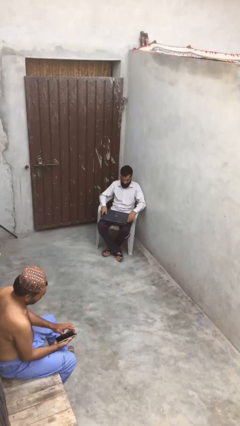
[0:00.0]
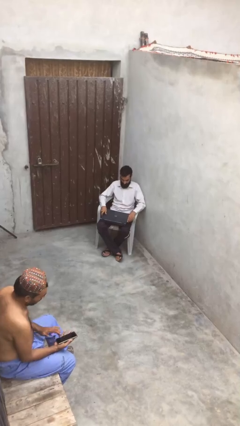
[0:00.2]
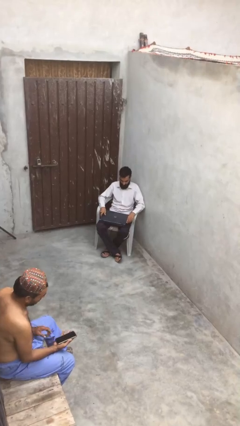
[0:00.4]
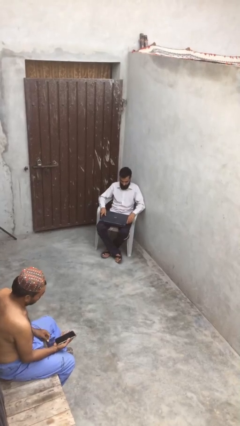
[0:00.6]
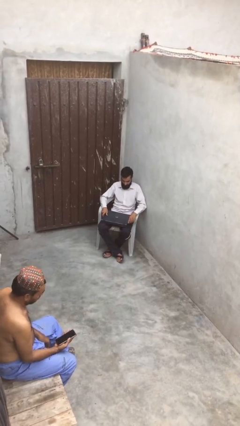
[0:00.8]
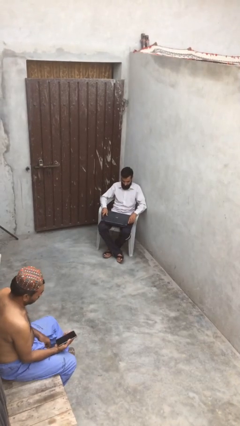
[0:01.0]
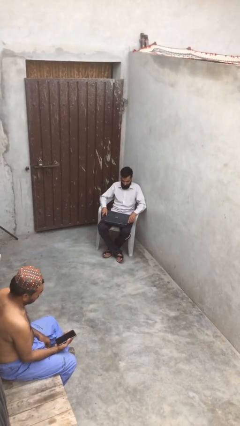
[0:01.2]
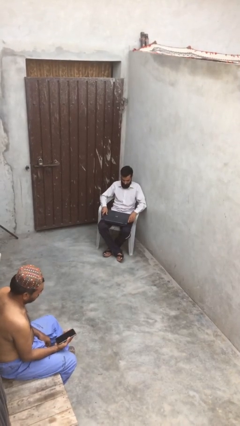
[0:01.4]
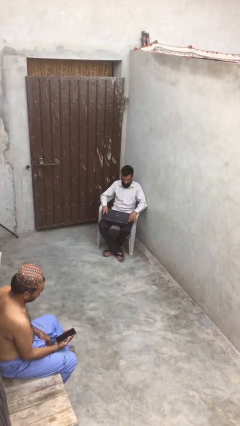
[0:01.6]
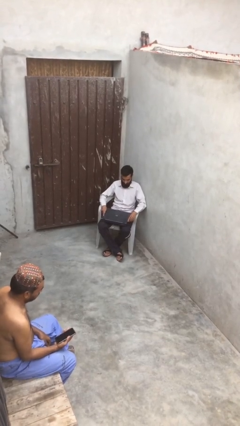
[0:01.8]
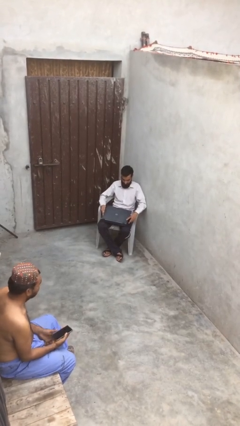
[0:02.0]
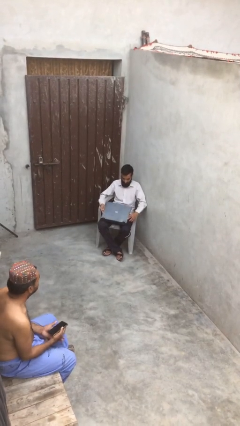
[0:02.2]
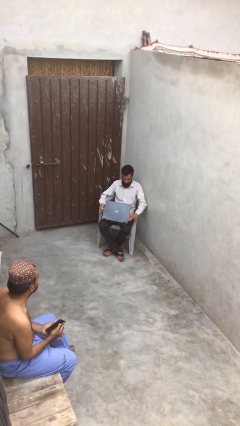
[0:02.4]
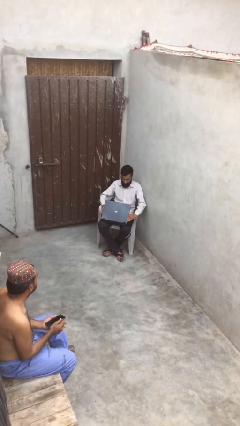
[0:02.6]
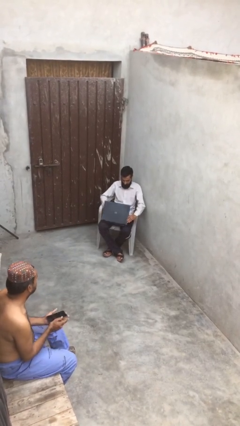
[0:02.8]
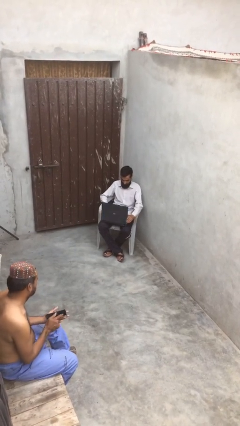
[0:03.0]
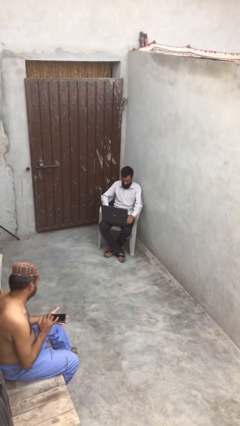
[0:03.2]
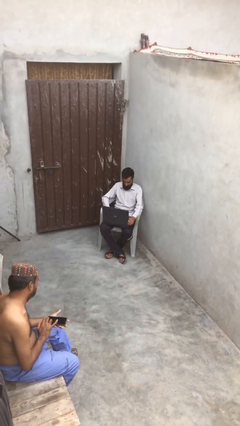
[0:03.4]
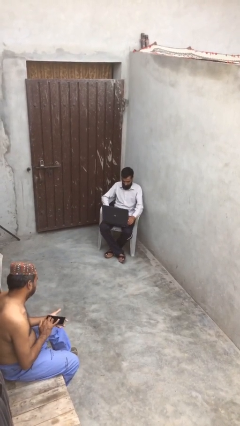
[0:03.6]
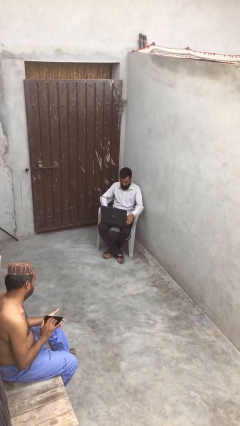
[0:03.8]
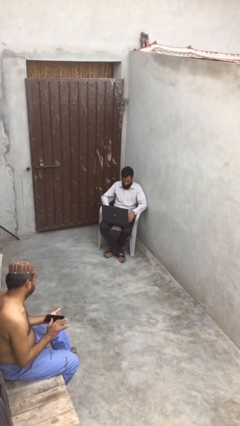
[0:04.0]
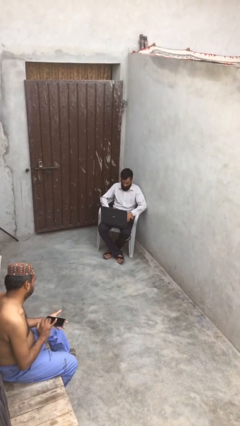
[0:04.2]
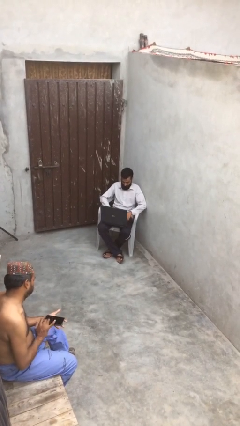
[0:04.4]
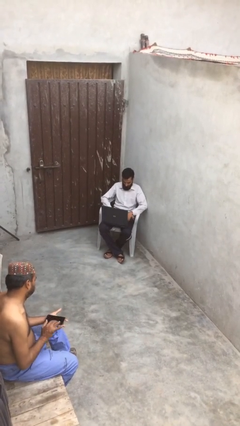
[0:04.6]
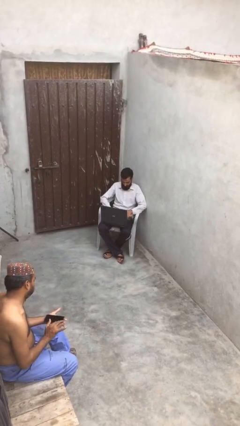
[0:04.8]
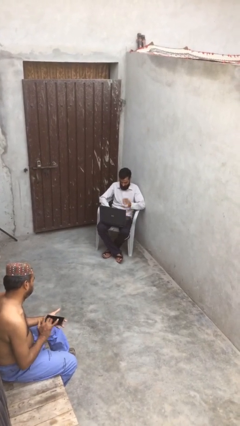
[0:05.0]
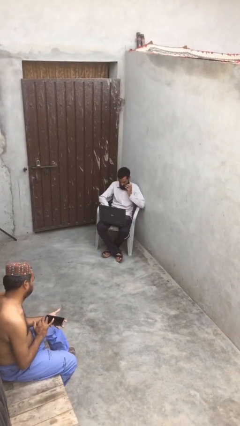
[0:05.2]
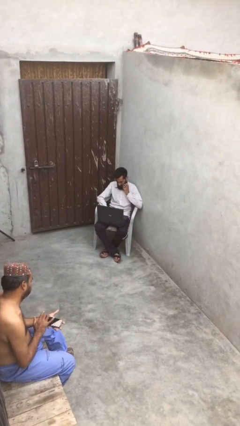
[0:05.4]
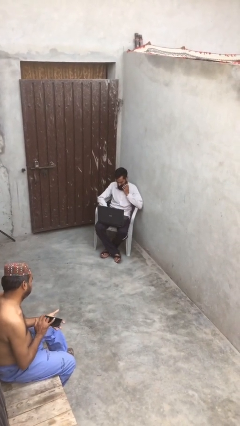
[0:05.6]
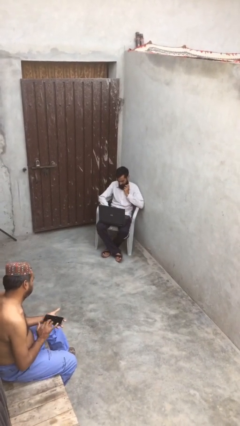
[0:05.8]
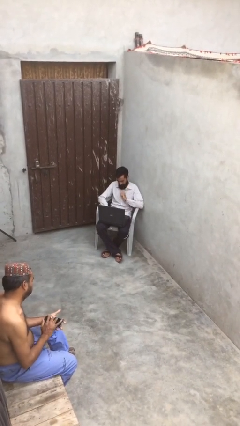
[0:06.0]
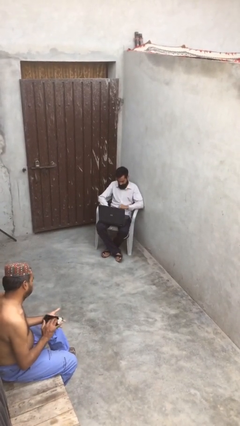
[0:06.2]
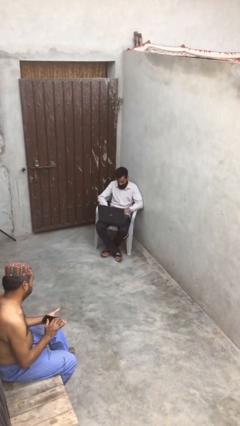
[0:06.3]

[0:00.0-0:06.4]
person interacts with laptop

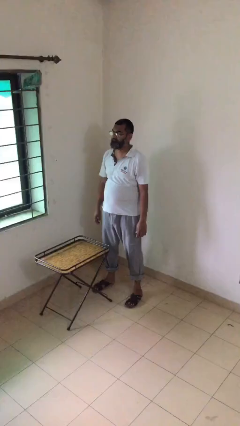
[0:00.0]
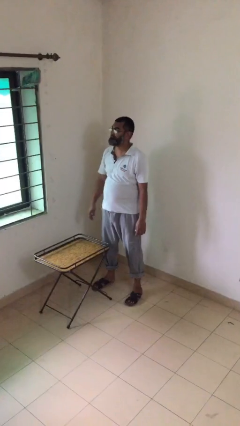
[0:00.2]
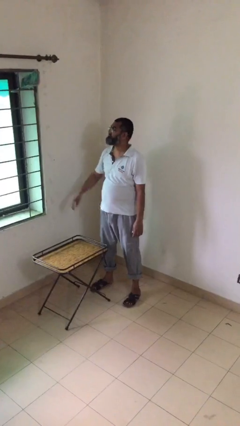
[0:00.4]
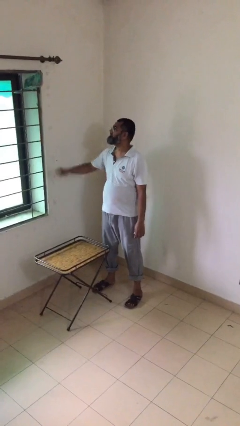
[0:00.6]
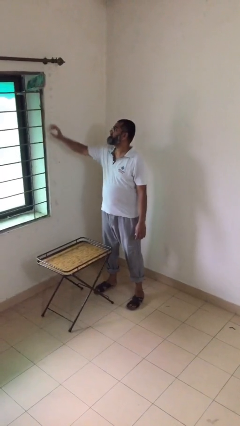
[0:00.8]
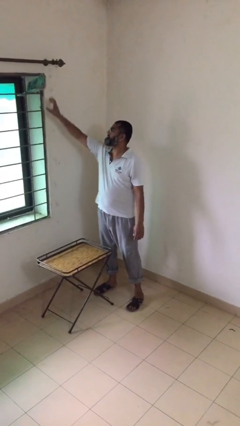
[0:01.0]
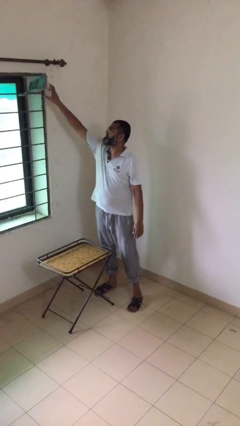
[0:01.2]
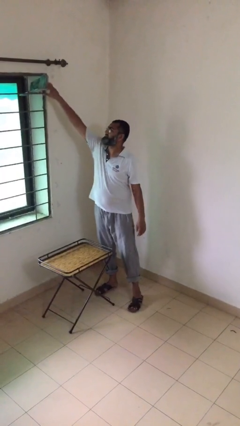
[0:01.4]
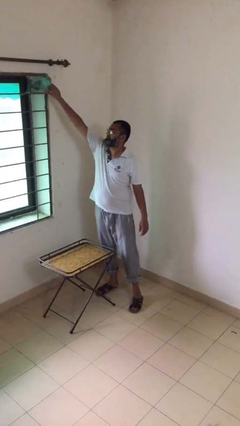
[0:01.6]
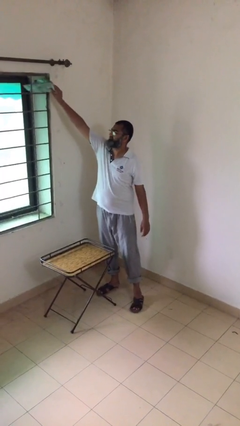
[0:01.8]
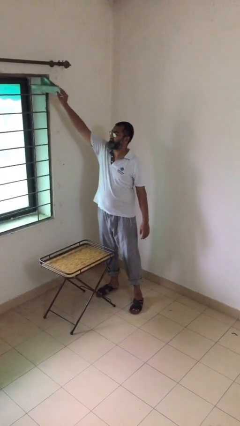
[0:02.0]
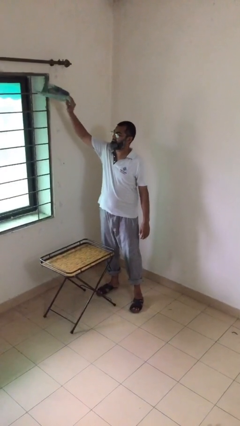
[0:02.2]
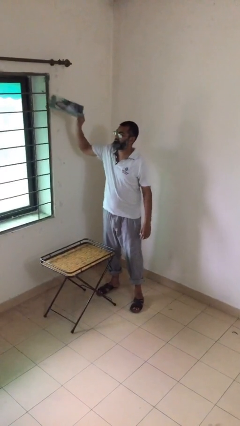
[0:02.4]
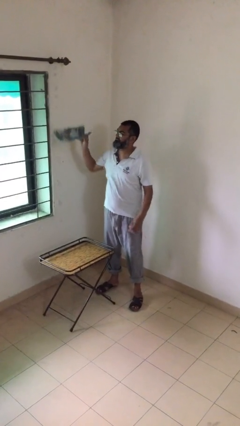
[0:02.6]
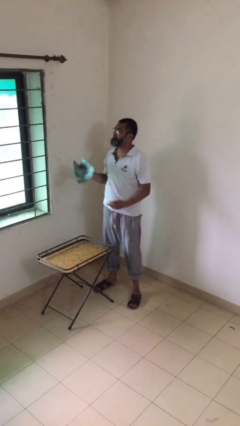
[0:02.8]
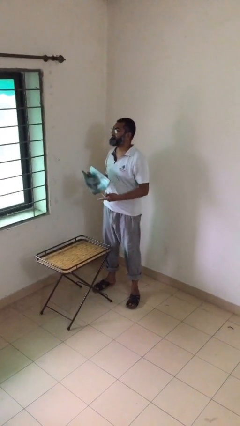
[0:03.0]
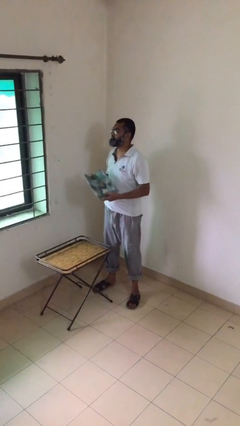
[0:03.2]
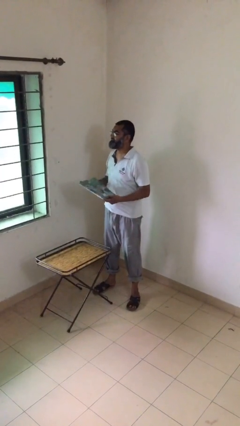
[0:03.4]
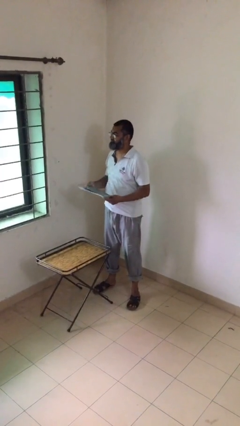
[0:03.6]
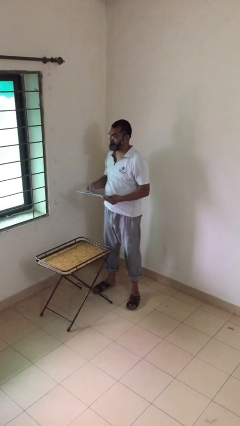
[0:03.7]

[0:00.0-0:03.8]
person picks up object from shelf

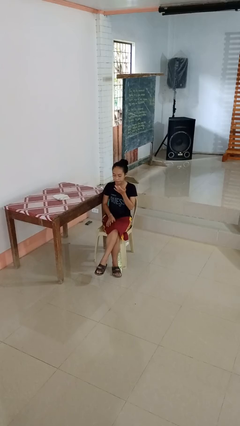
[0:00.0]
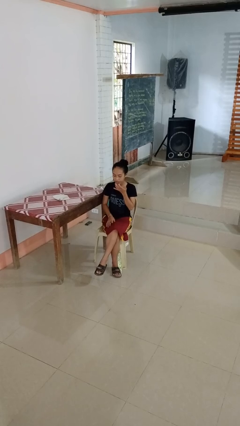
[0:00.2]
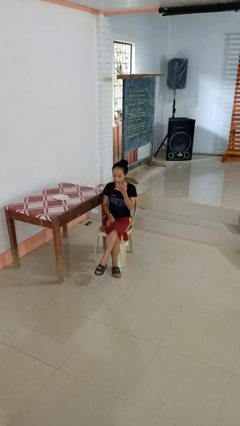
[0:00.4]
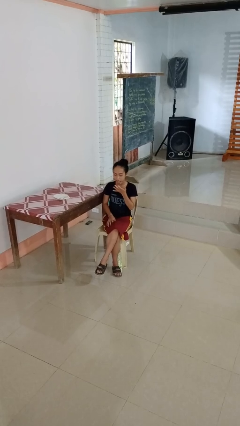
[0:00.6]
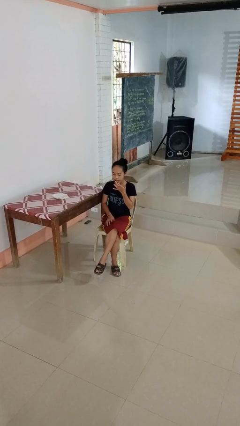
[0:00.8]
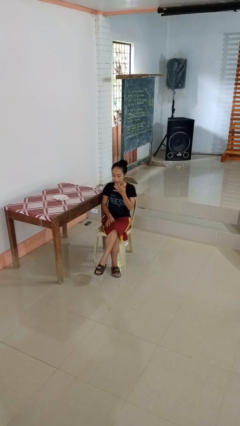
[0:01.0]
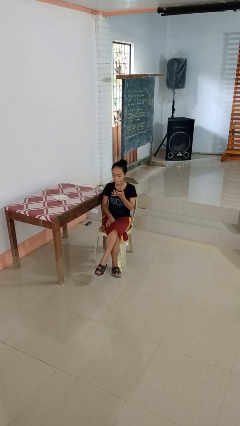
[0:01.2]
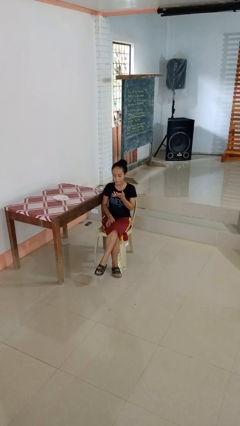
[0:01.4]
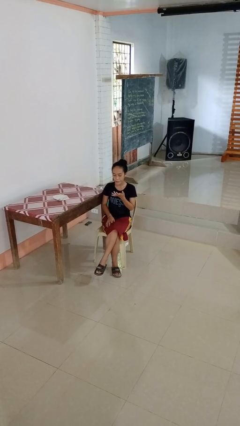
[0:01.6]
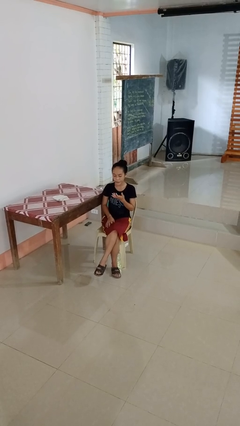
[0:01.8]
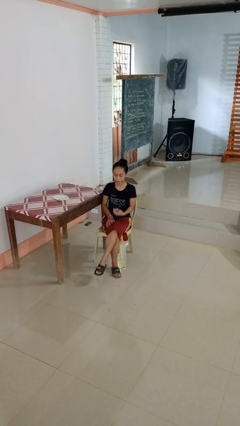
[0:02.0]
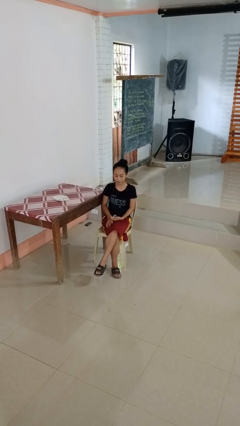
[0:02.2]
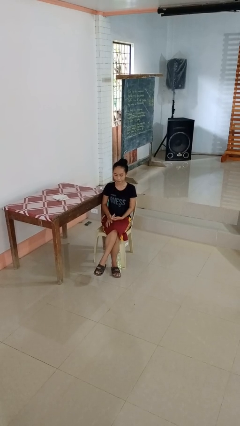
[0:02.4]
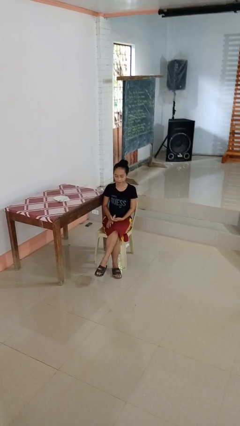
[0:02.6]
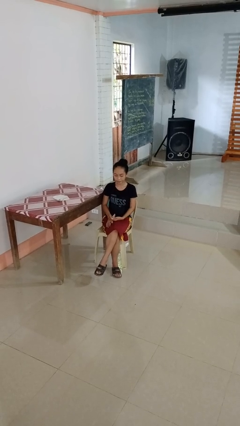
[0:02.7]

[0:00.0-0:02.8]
person licks fingers

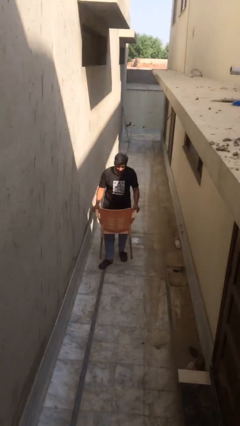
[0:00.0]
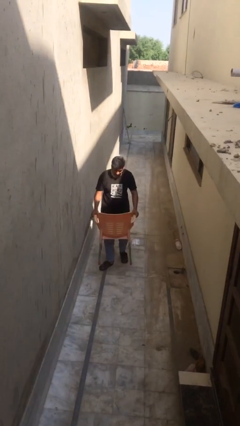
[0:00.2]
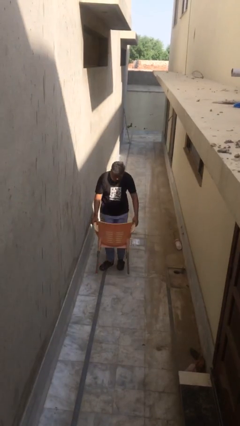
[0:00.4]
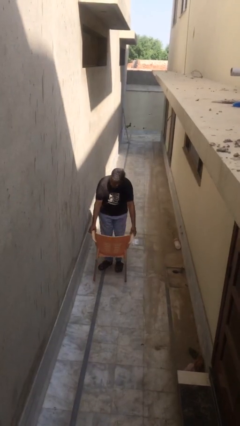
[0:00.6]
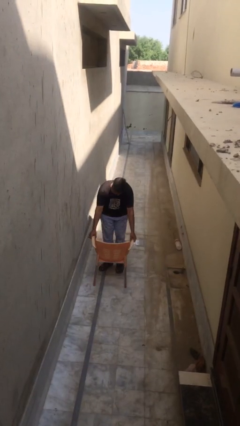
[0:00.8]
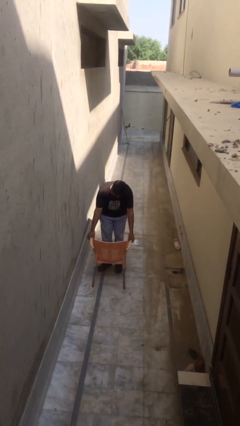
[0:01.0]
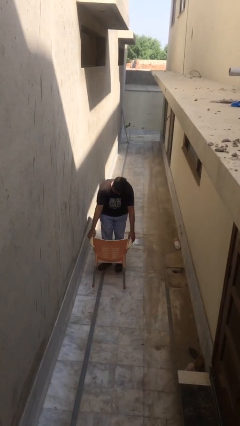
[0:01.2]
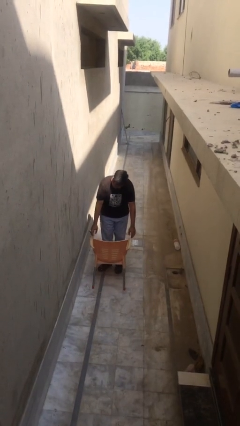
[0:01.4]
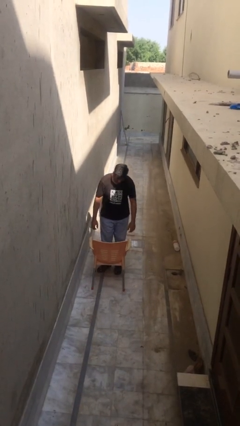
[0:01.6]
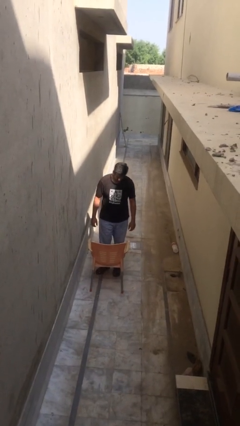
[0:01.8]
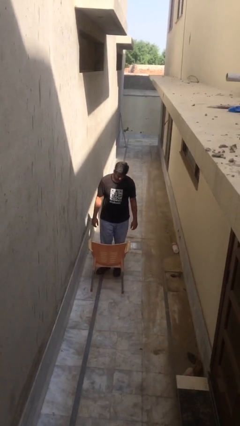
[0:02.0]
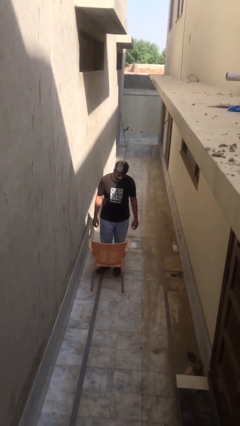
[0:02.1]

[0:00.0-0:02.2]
person puts down object on floor

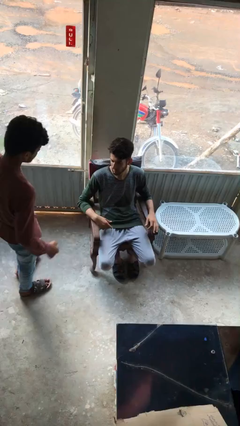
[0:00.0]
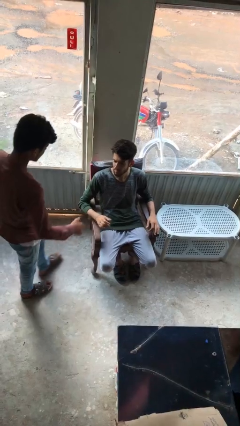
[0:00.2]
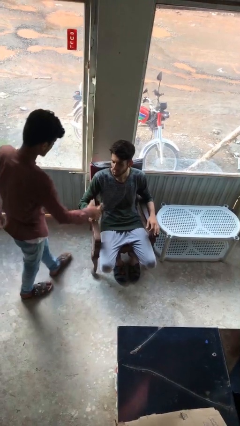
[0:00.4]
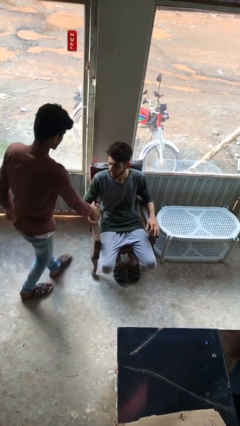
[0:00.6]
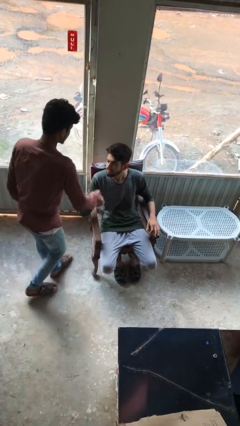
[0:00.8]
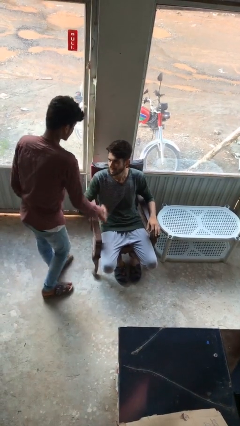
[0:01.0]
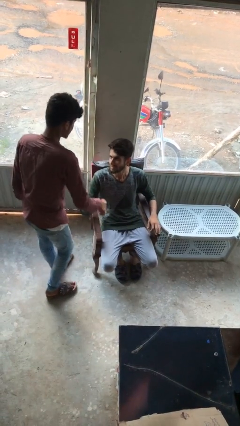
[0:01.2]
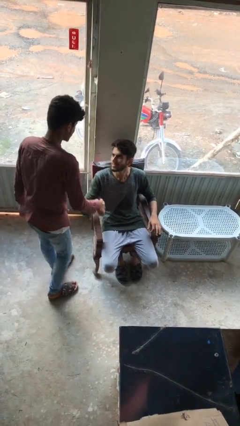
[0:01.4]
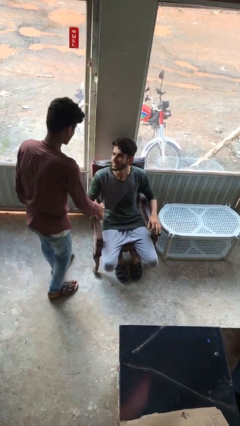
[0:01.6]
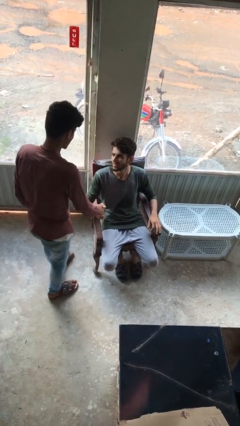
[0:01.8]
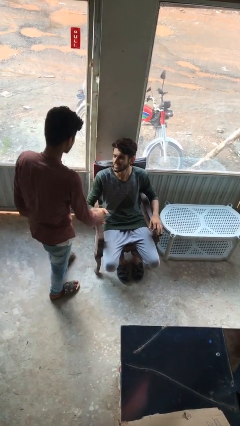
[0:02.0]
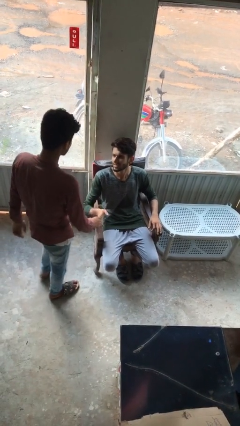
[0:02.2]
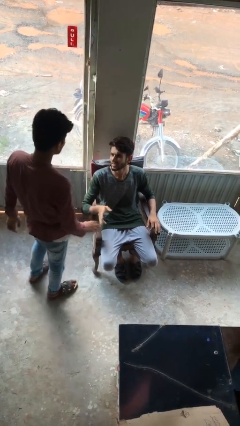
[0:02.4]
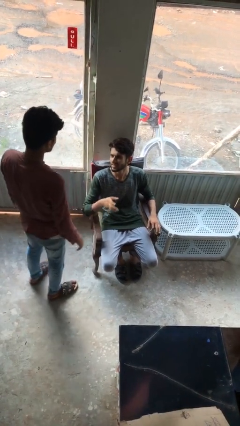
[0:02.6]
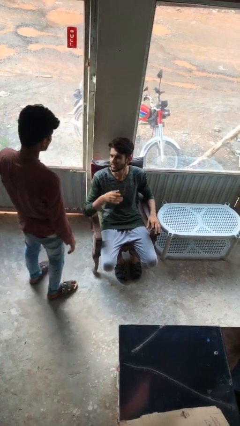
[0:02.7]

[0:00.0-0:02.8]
person shakes hand
